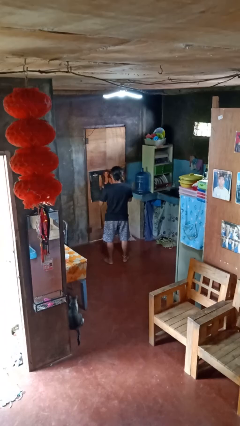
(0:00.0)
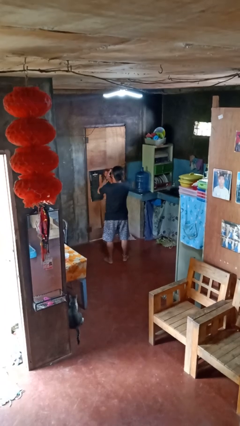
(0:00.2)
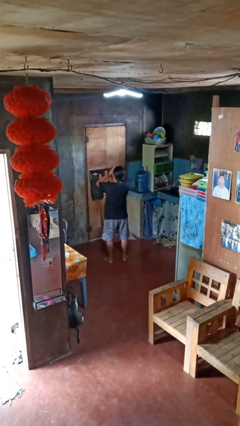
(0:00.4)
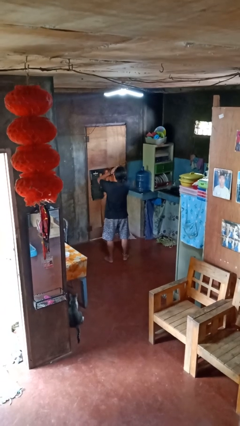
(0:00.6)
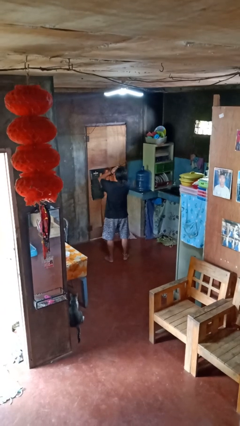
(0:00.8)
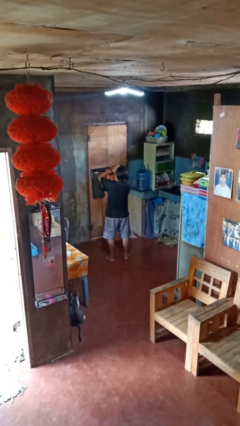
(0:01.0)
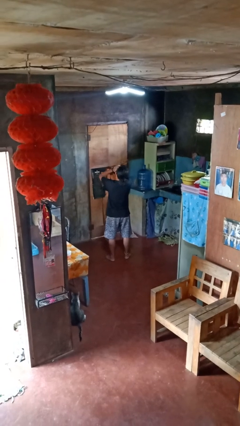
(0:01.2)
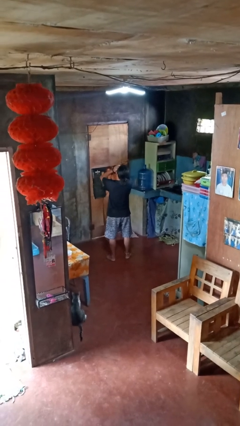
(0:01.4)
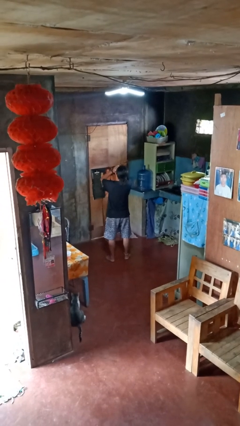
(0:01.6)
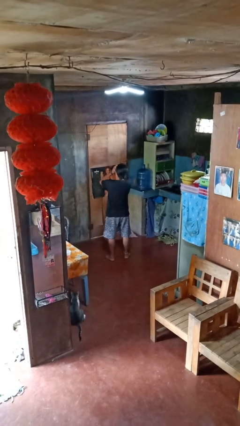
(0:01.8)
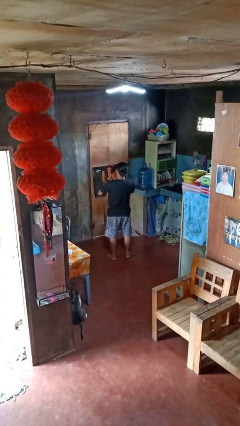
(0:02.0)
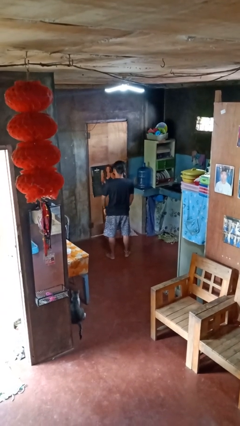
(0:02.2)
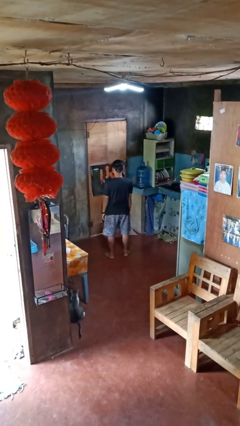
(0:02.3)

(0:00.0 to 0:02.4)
person yawns

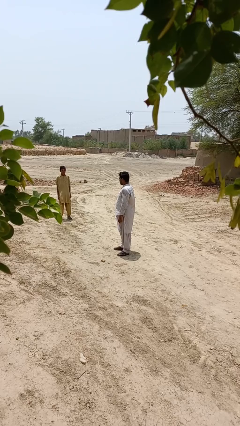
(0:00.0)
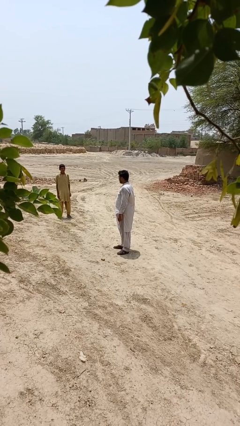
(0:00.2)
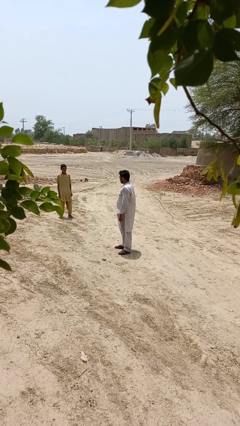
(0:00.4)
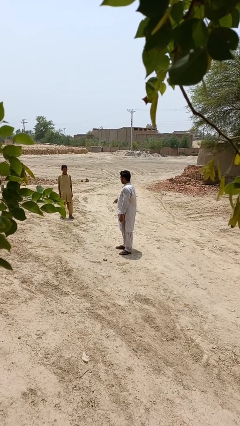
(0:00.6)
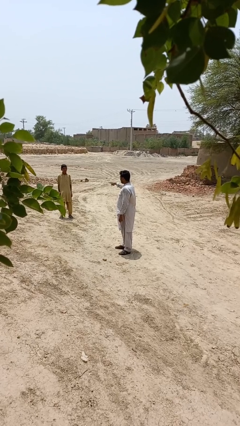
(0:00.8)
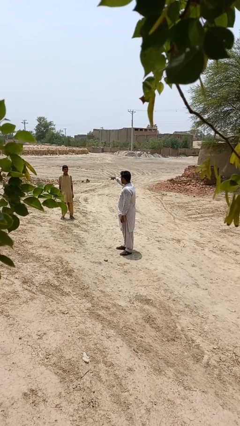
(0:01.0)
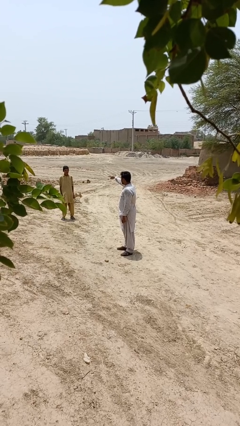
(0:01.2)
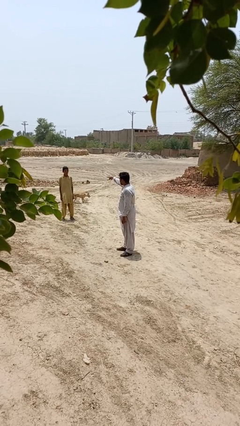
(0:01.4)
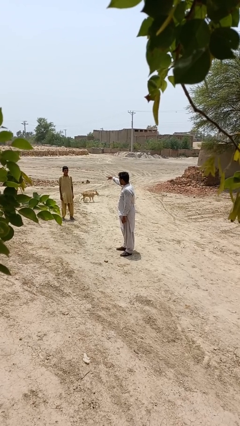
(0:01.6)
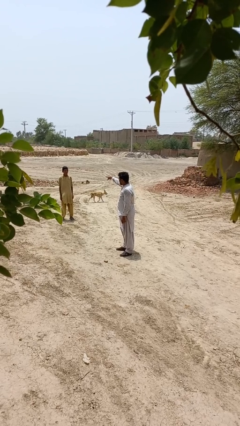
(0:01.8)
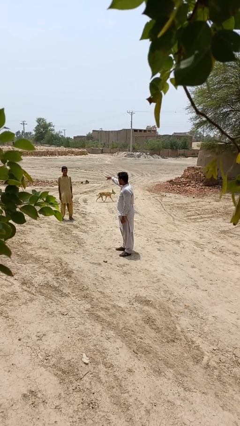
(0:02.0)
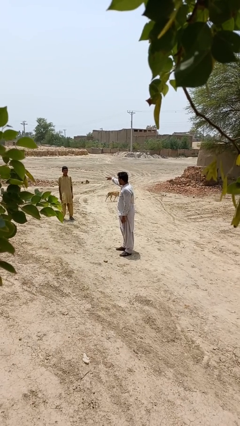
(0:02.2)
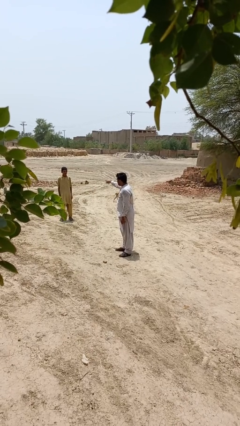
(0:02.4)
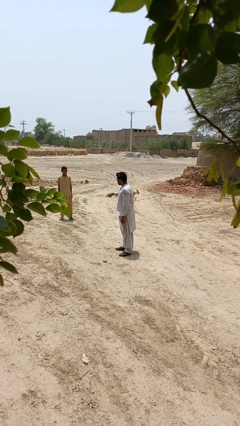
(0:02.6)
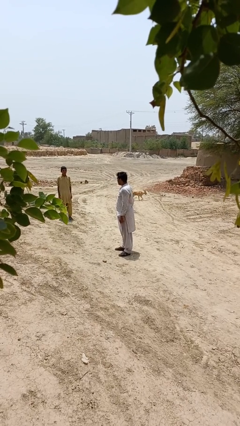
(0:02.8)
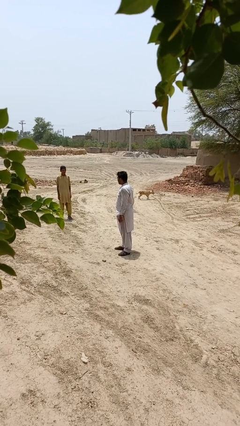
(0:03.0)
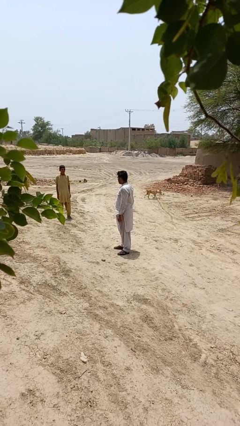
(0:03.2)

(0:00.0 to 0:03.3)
person points at person

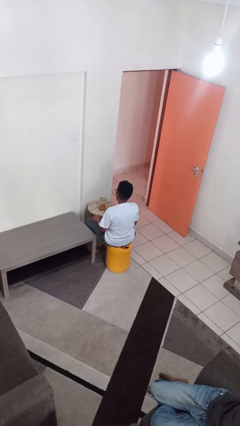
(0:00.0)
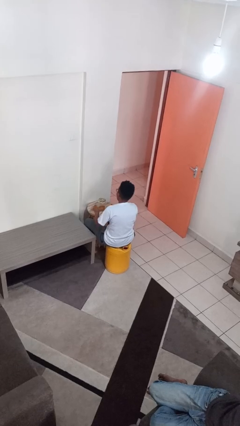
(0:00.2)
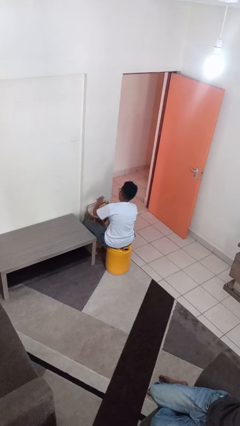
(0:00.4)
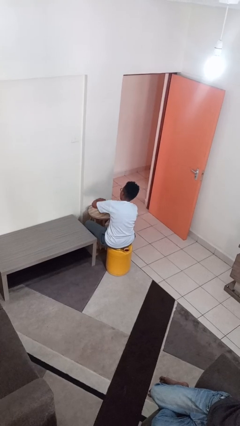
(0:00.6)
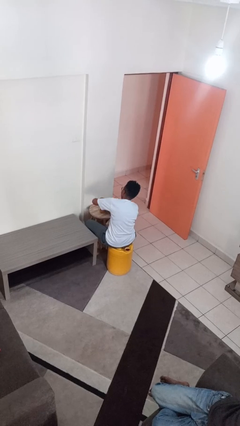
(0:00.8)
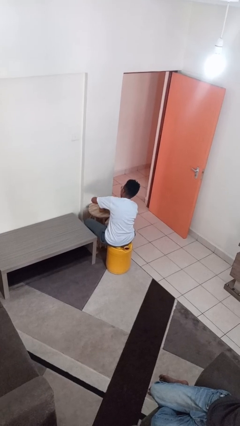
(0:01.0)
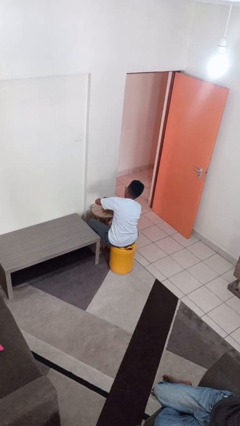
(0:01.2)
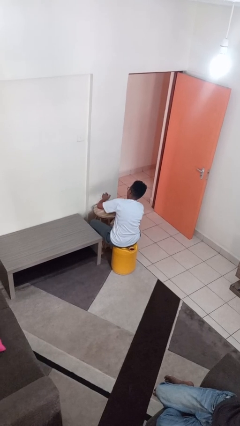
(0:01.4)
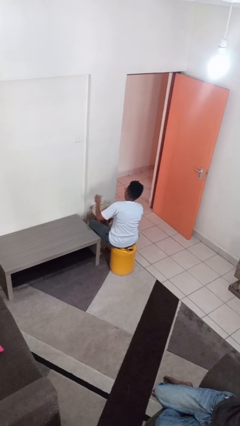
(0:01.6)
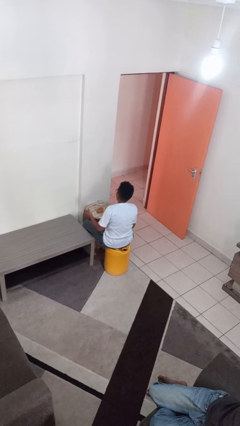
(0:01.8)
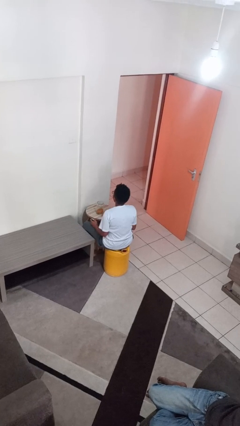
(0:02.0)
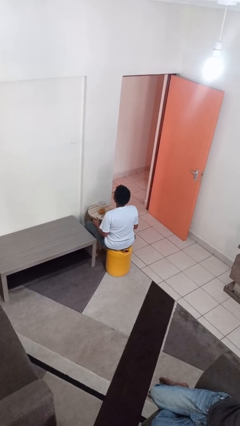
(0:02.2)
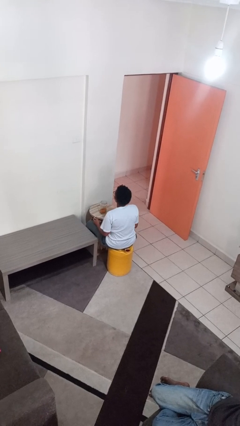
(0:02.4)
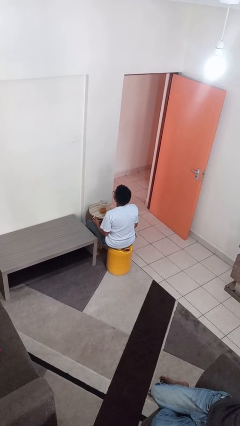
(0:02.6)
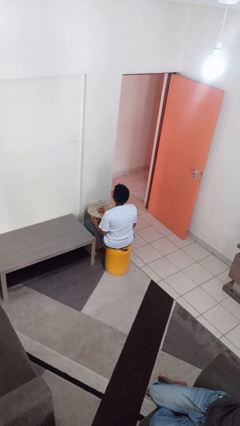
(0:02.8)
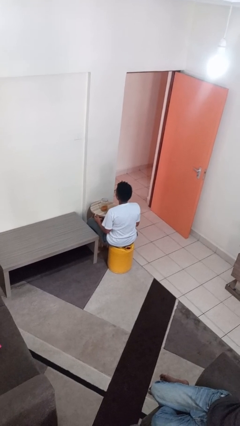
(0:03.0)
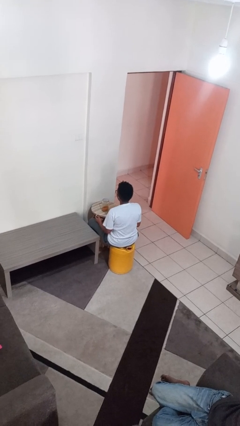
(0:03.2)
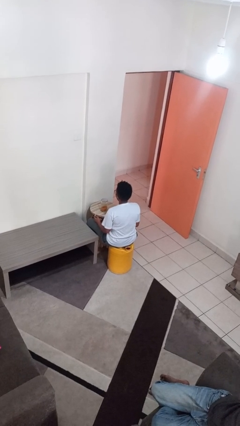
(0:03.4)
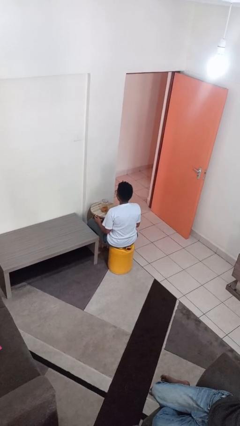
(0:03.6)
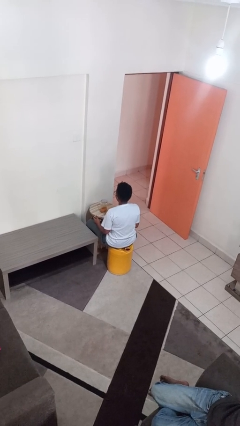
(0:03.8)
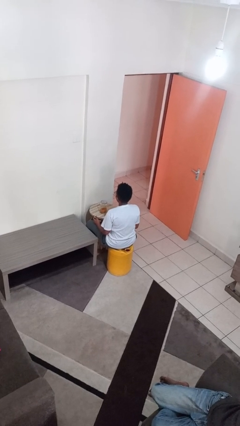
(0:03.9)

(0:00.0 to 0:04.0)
person opens jar

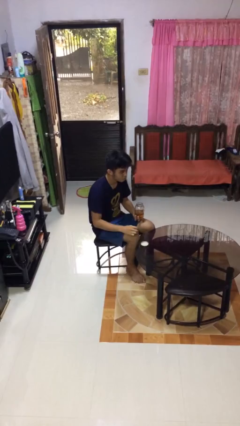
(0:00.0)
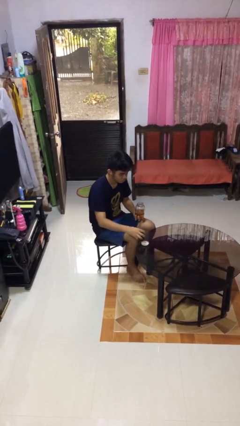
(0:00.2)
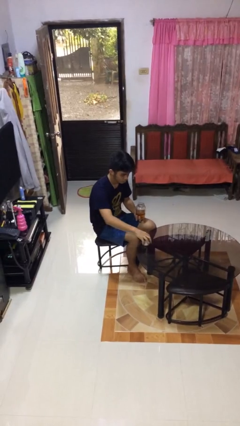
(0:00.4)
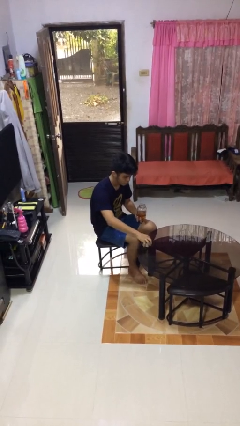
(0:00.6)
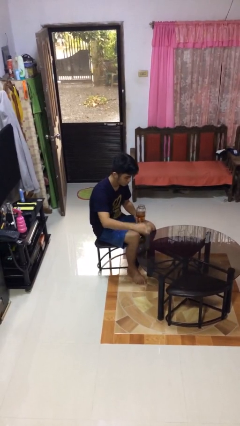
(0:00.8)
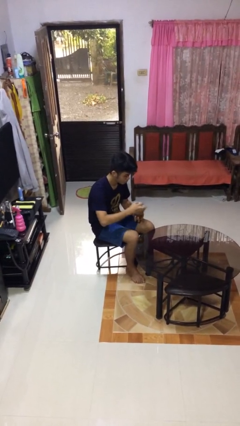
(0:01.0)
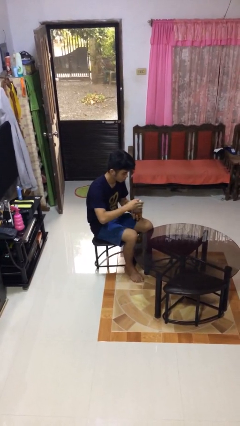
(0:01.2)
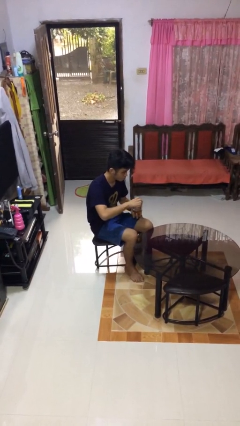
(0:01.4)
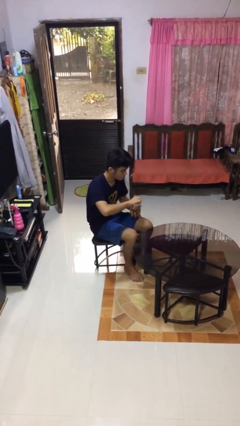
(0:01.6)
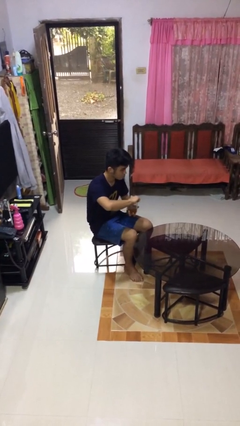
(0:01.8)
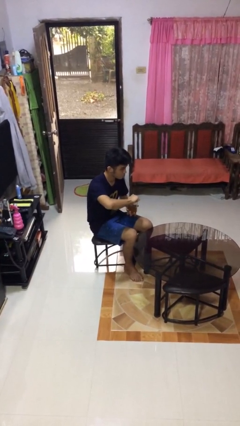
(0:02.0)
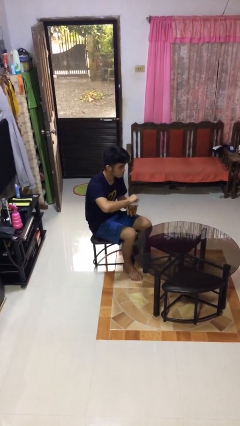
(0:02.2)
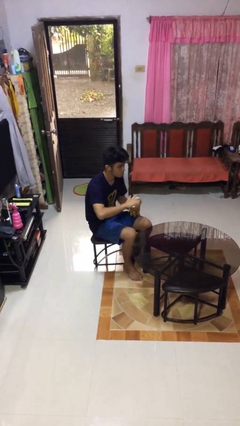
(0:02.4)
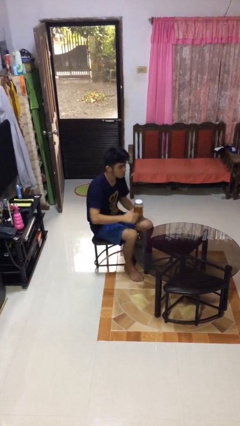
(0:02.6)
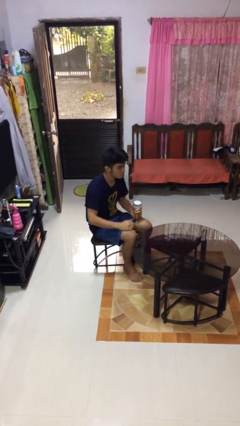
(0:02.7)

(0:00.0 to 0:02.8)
person closes jar

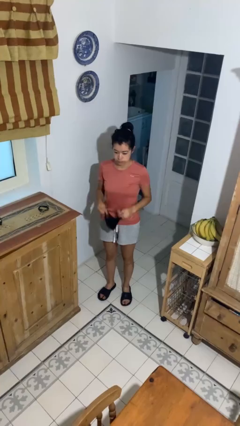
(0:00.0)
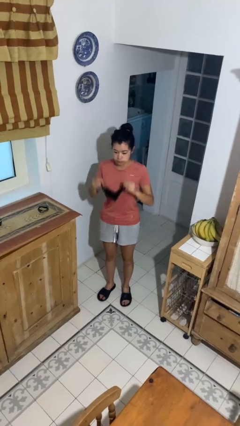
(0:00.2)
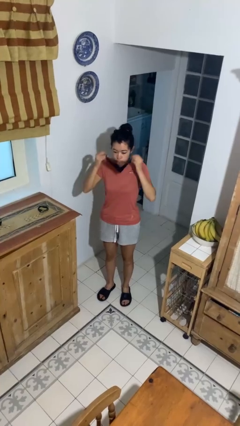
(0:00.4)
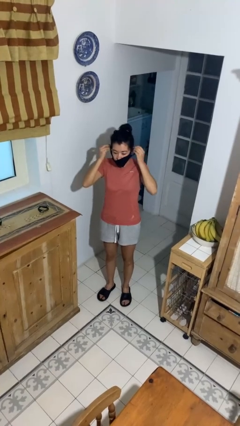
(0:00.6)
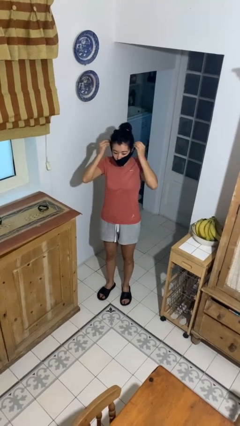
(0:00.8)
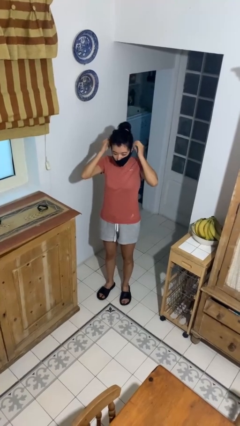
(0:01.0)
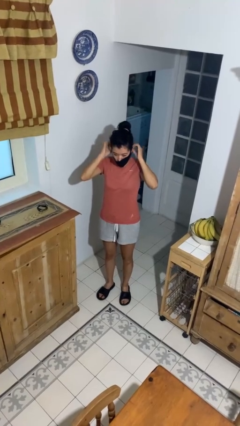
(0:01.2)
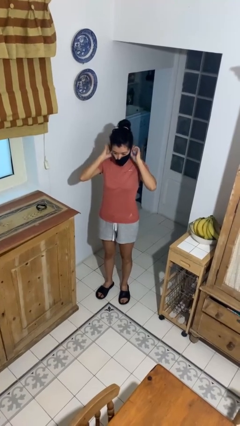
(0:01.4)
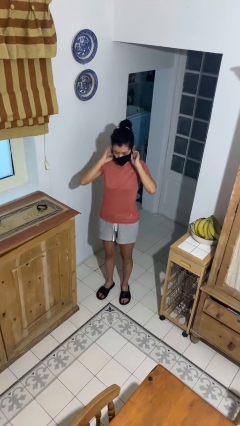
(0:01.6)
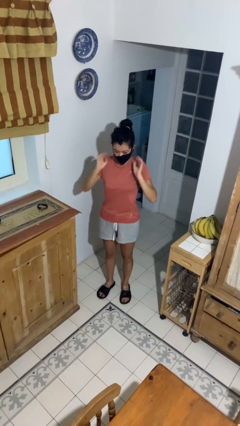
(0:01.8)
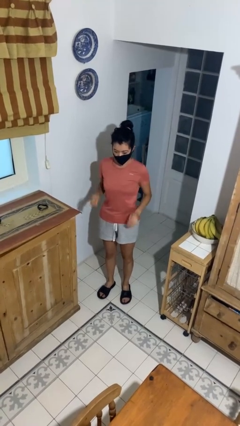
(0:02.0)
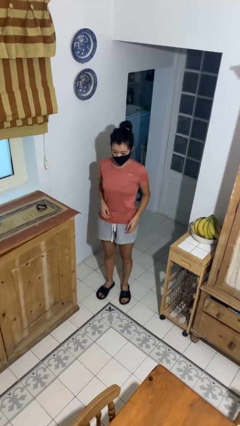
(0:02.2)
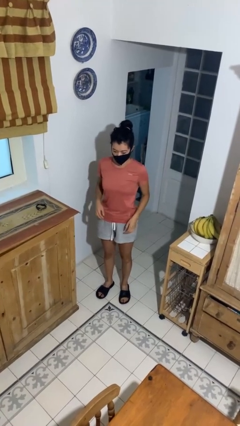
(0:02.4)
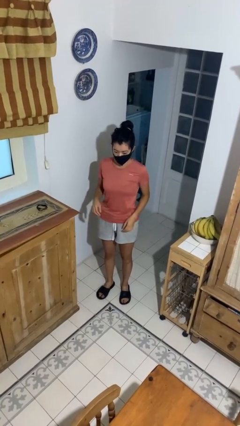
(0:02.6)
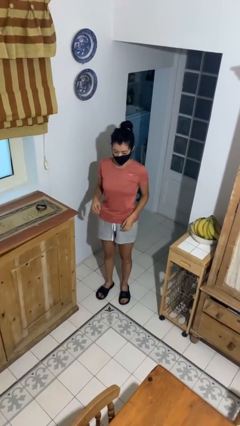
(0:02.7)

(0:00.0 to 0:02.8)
person puts on facemask

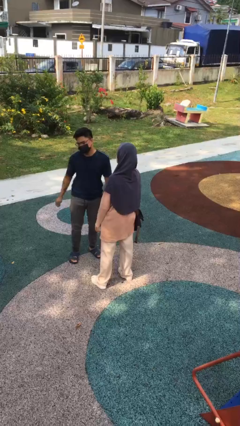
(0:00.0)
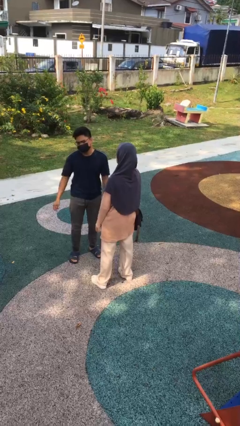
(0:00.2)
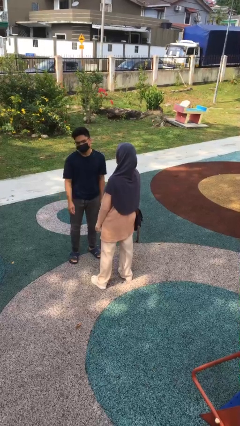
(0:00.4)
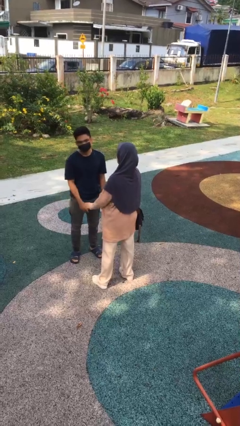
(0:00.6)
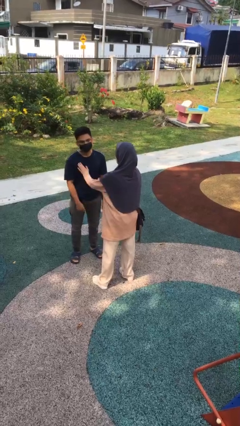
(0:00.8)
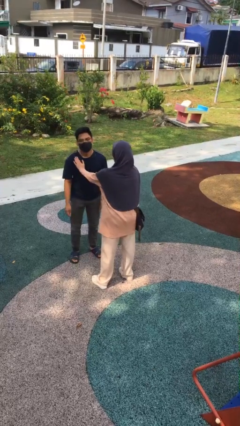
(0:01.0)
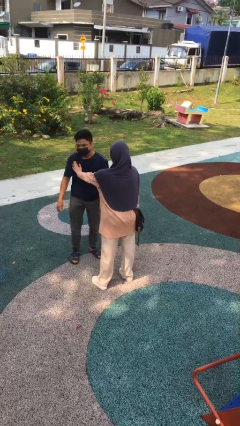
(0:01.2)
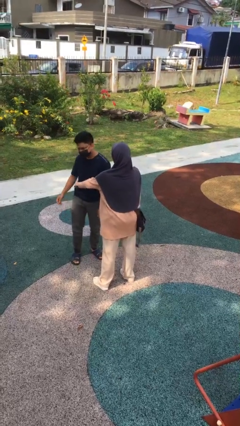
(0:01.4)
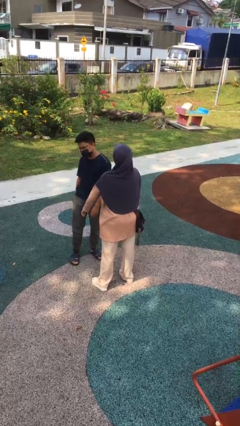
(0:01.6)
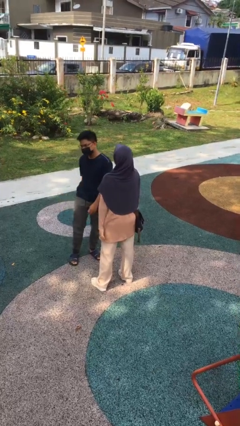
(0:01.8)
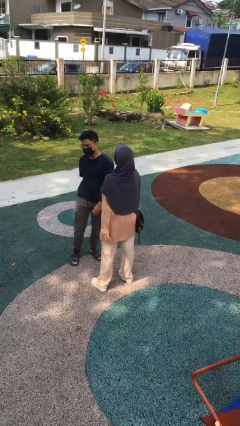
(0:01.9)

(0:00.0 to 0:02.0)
person shoves person

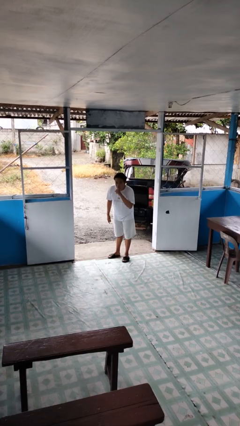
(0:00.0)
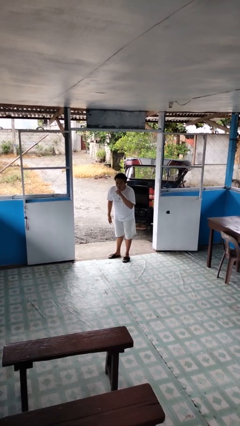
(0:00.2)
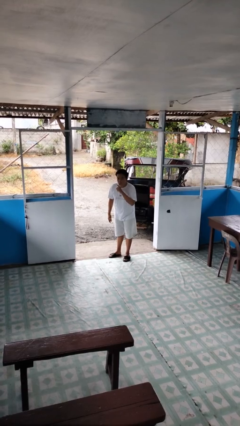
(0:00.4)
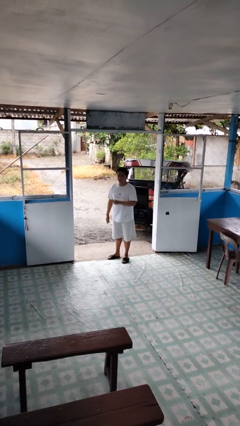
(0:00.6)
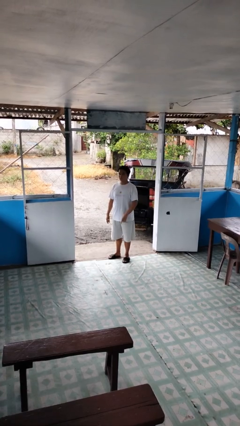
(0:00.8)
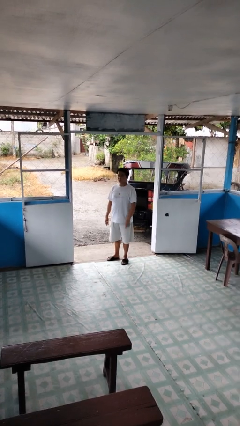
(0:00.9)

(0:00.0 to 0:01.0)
person gestures be quiet
